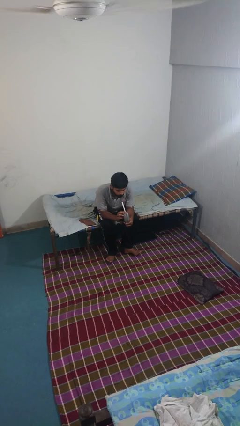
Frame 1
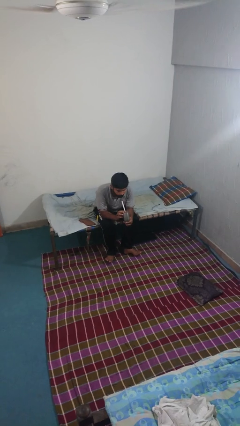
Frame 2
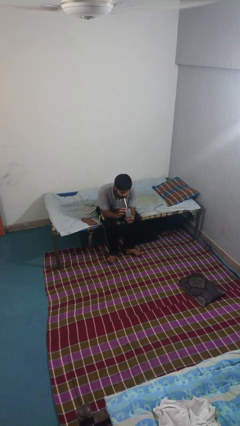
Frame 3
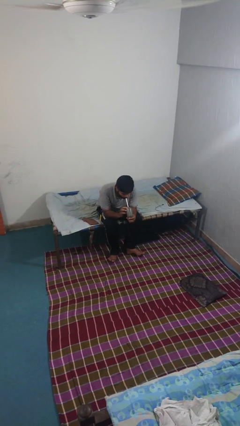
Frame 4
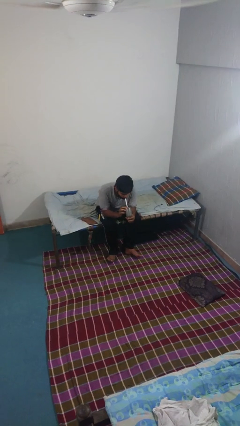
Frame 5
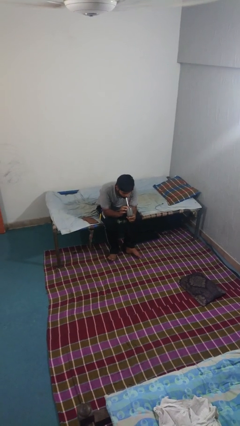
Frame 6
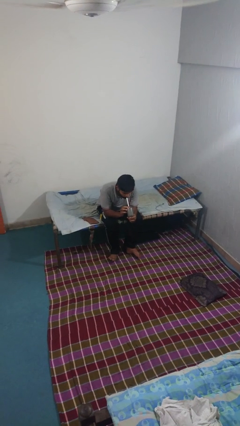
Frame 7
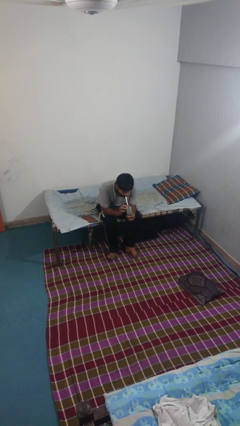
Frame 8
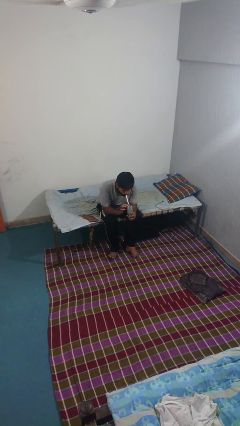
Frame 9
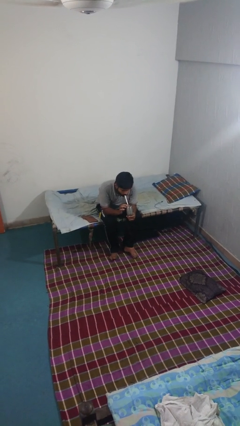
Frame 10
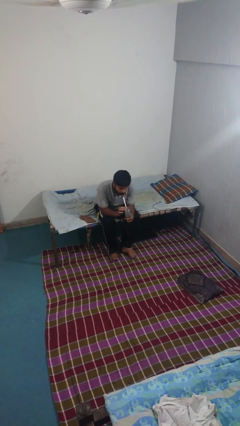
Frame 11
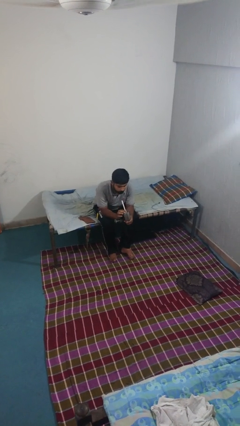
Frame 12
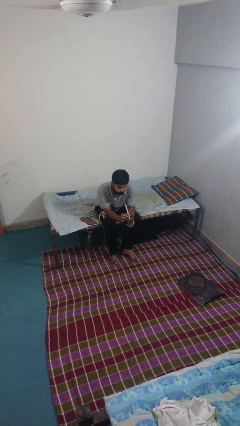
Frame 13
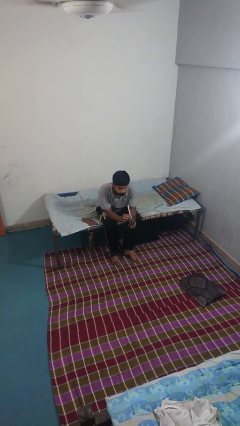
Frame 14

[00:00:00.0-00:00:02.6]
person drinks from straw

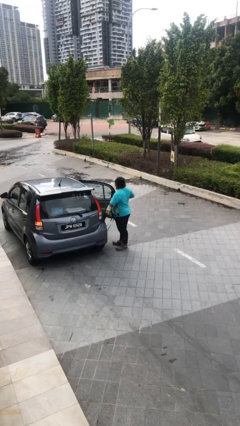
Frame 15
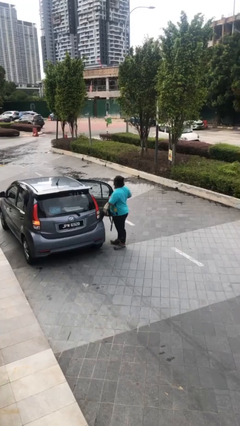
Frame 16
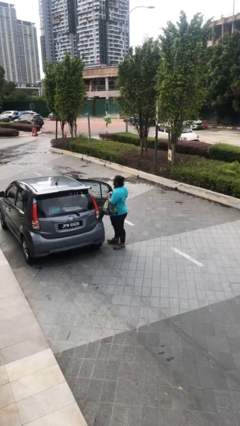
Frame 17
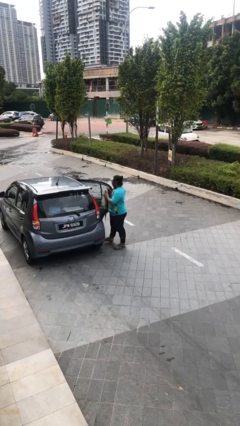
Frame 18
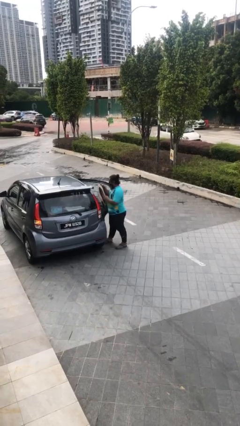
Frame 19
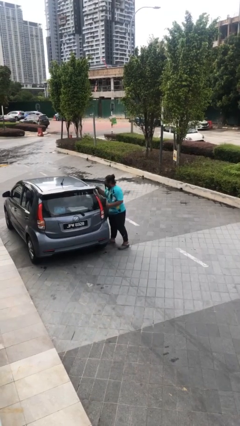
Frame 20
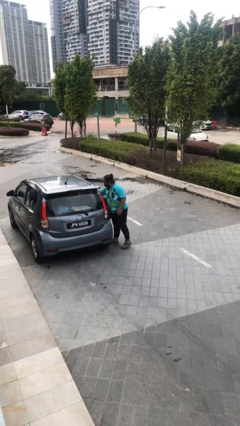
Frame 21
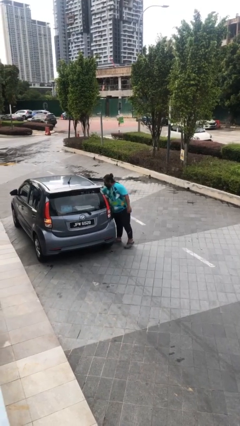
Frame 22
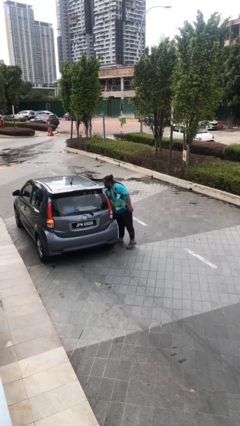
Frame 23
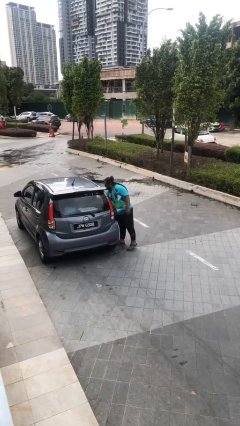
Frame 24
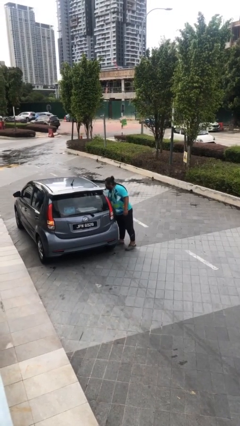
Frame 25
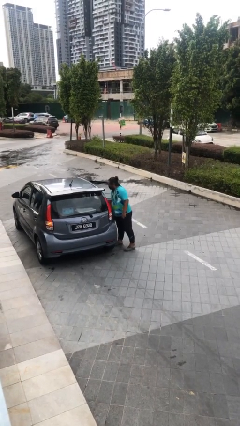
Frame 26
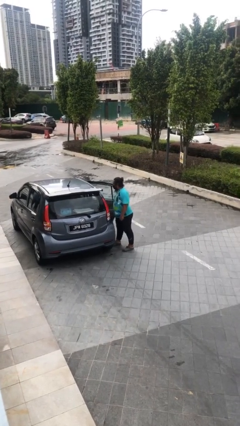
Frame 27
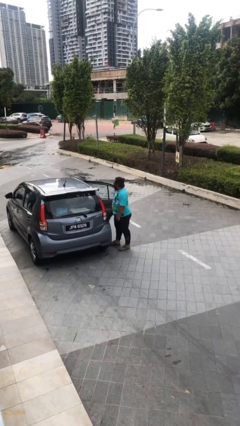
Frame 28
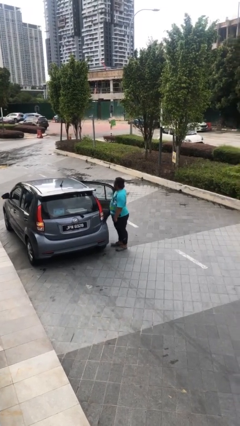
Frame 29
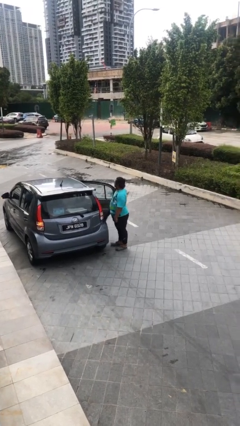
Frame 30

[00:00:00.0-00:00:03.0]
person loads car

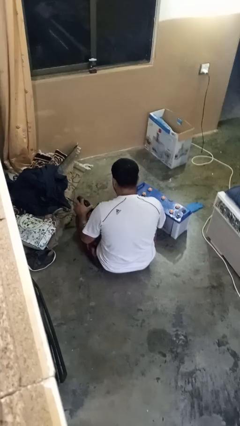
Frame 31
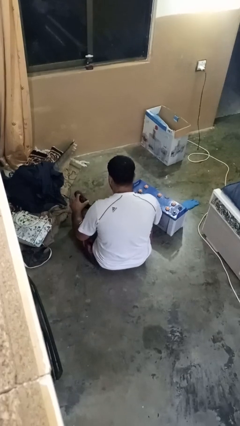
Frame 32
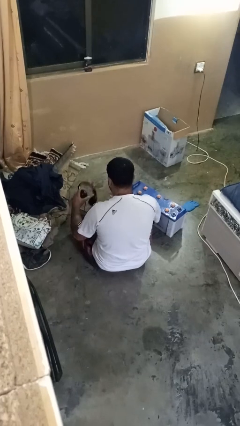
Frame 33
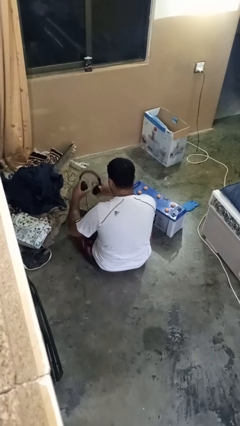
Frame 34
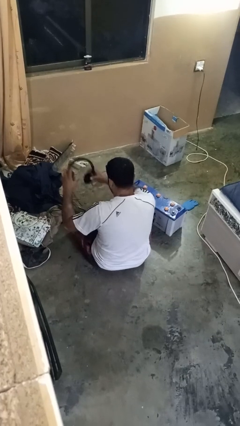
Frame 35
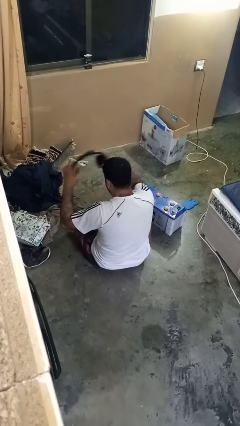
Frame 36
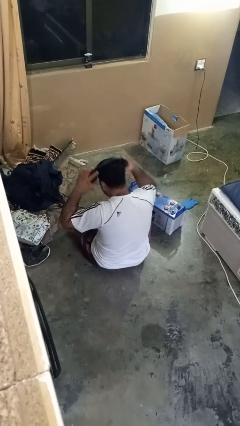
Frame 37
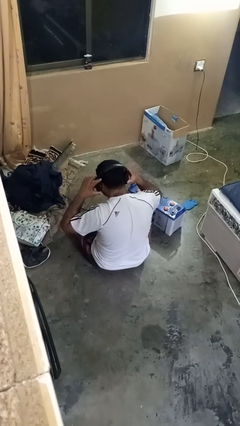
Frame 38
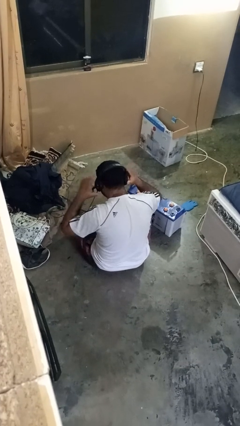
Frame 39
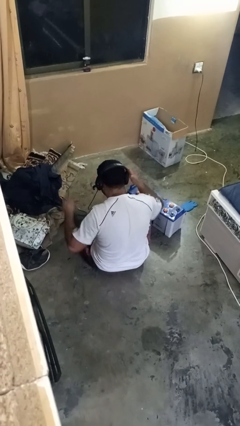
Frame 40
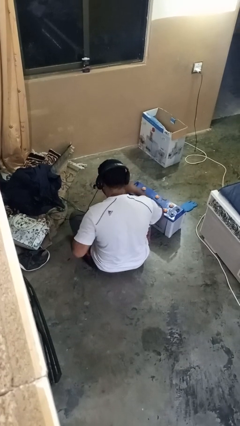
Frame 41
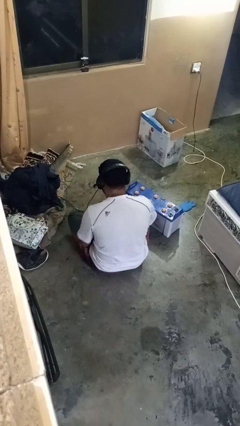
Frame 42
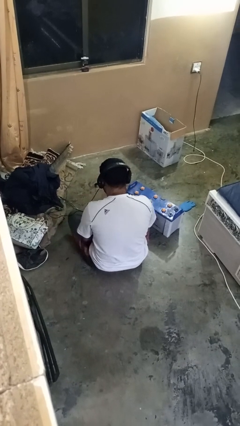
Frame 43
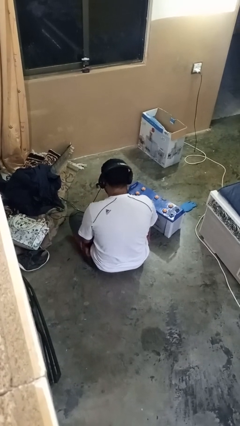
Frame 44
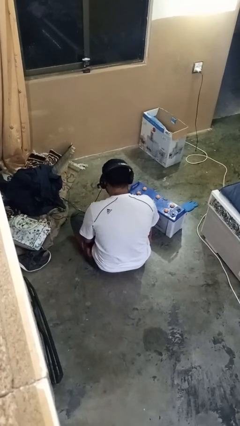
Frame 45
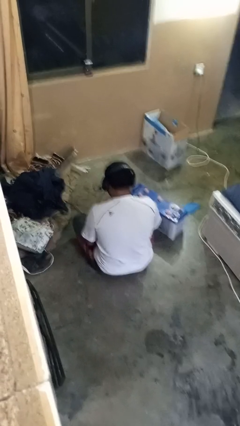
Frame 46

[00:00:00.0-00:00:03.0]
person puts on headphones

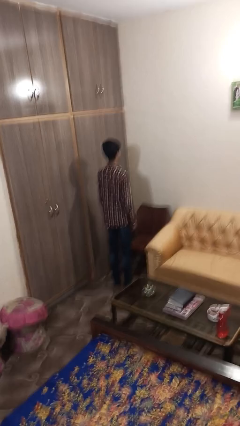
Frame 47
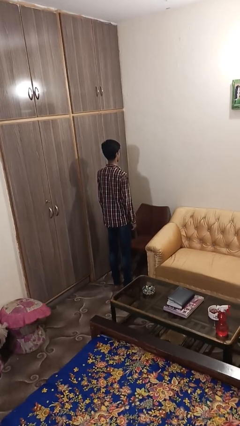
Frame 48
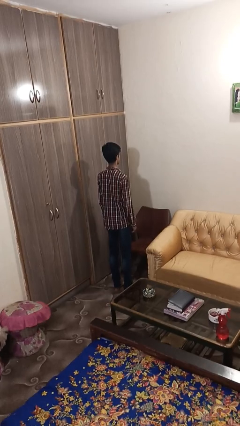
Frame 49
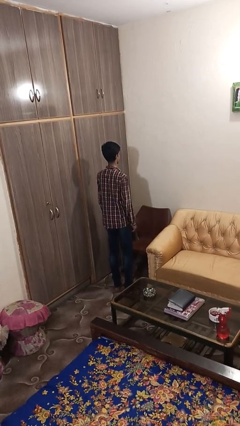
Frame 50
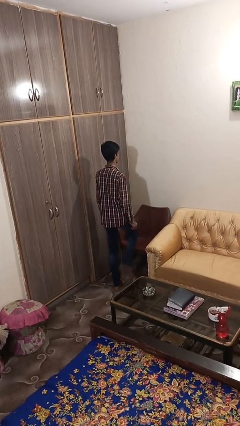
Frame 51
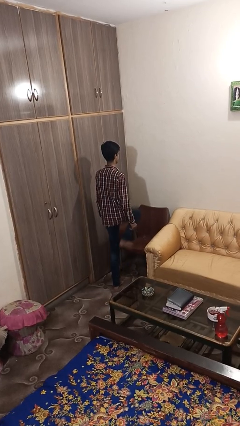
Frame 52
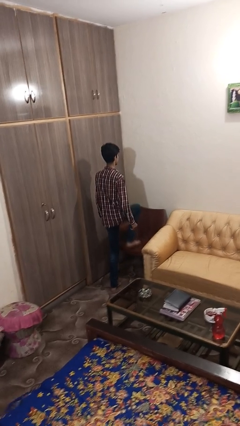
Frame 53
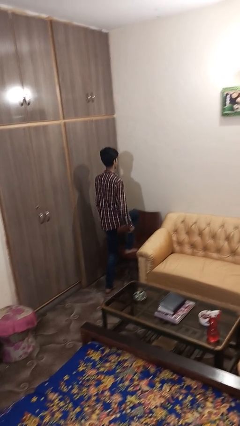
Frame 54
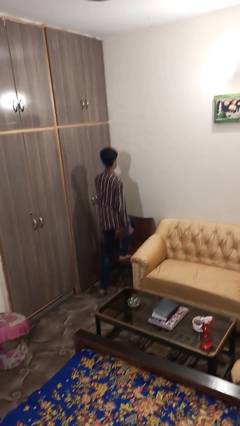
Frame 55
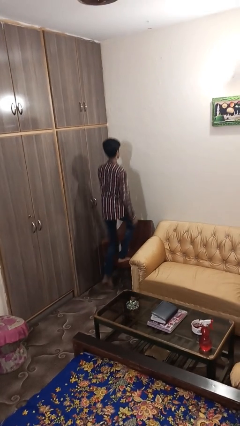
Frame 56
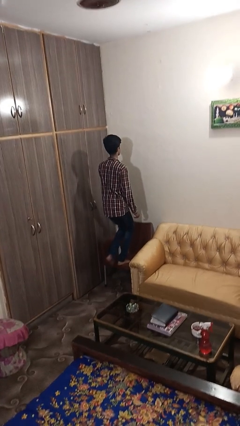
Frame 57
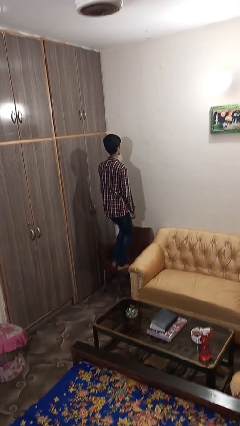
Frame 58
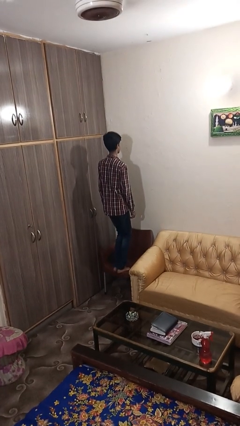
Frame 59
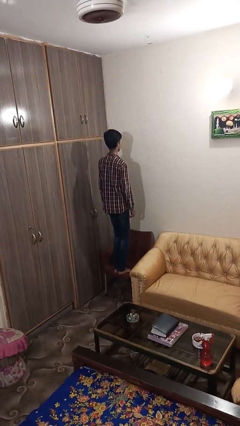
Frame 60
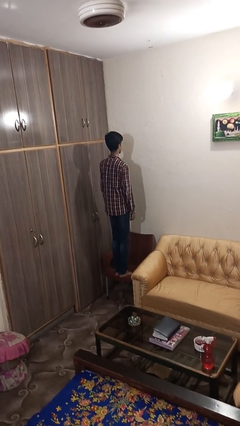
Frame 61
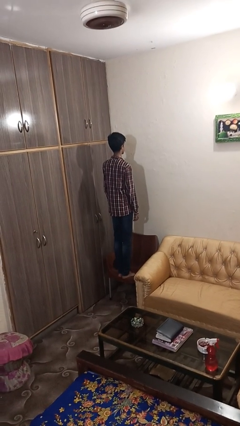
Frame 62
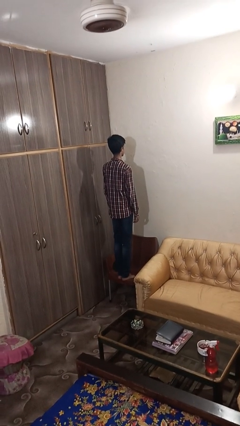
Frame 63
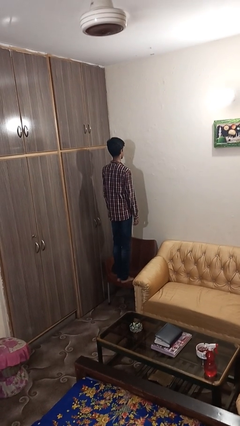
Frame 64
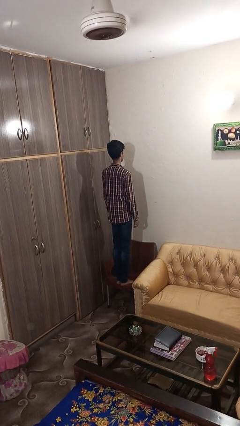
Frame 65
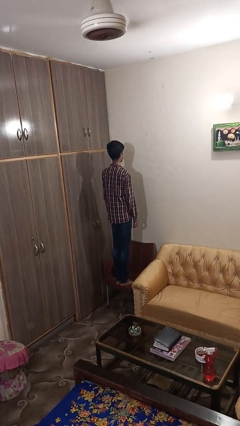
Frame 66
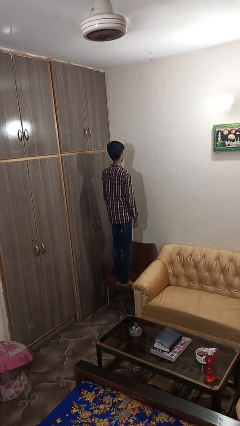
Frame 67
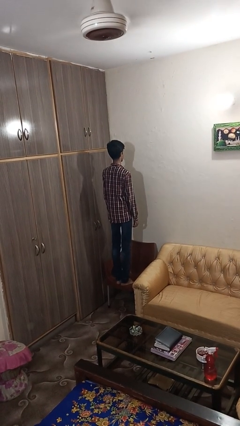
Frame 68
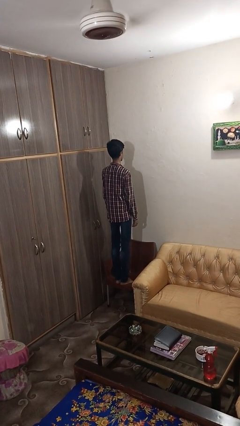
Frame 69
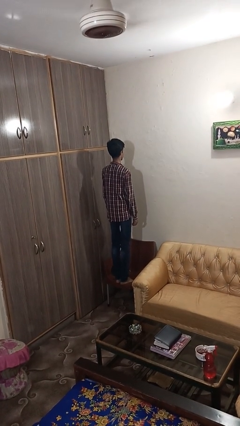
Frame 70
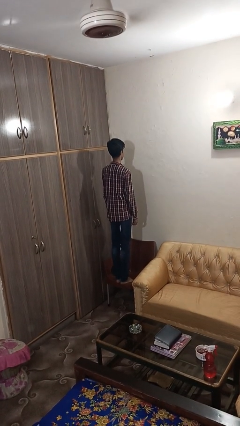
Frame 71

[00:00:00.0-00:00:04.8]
person climbs on chair

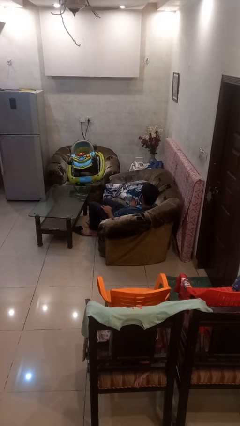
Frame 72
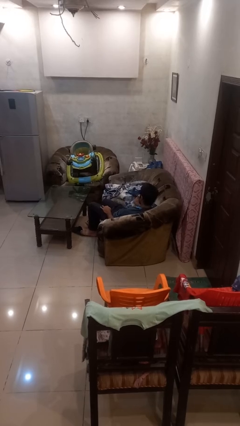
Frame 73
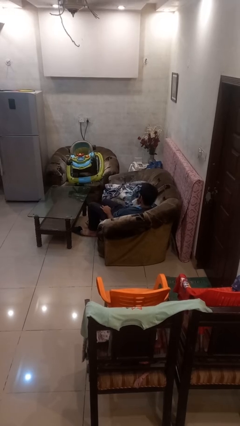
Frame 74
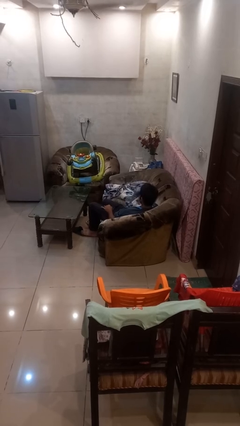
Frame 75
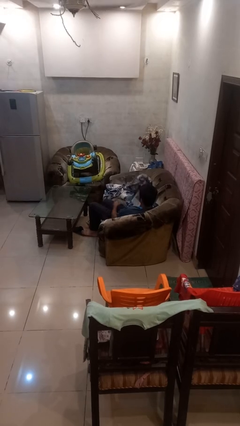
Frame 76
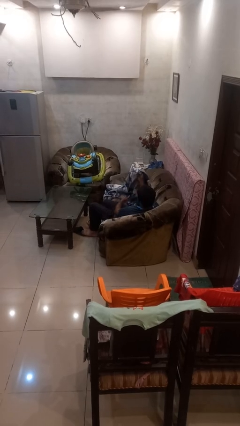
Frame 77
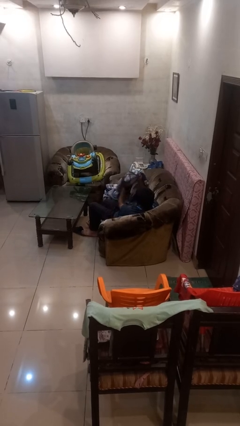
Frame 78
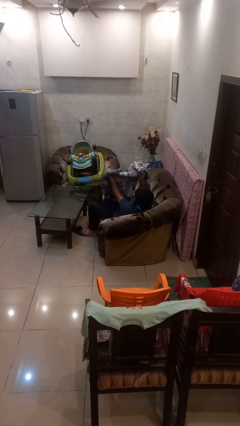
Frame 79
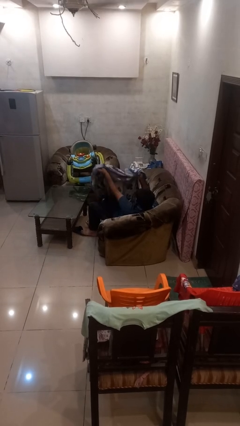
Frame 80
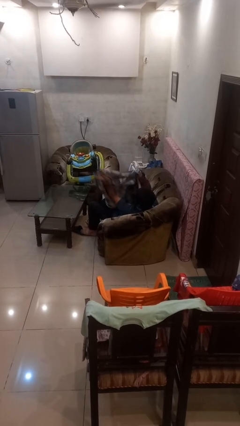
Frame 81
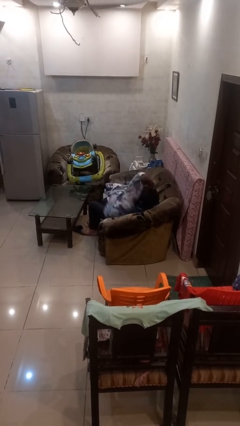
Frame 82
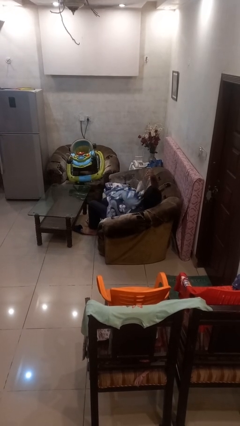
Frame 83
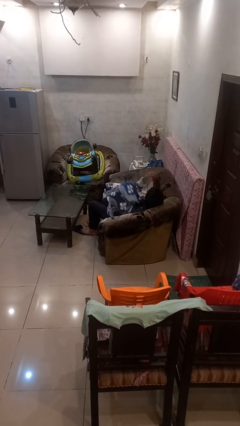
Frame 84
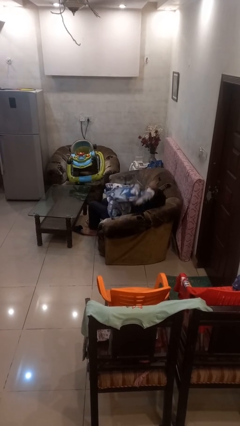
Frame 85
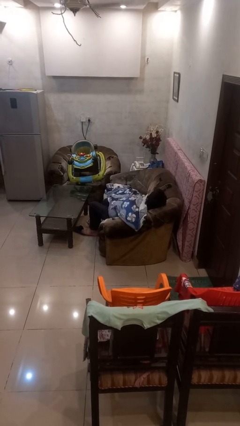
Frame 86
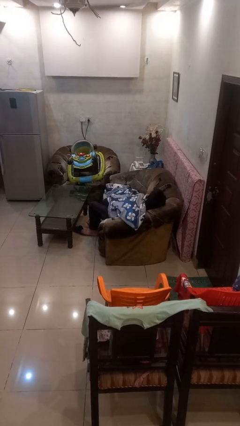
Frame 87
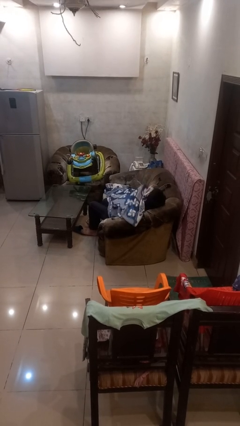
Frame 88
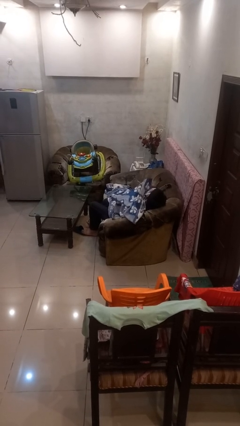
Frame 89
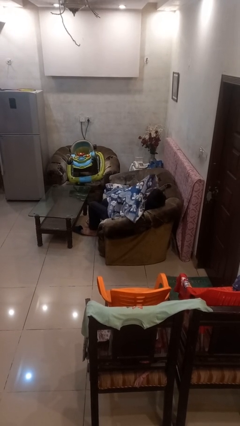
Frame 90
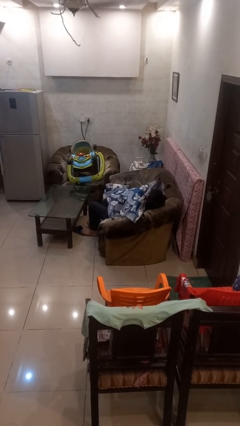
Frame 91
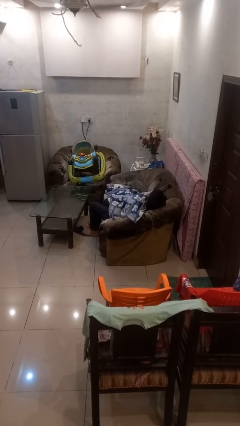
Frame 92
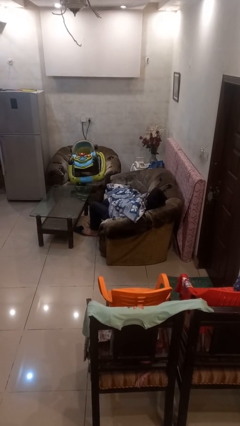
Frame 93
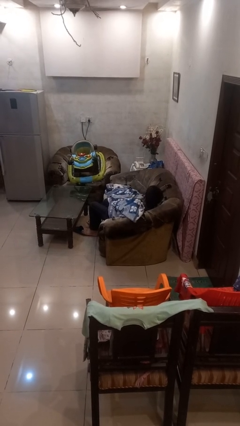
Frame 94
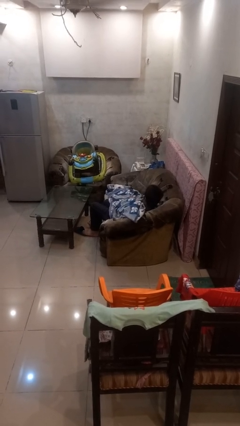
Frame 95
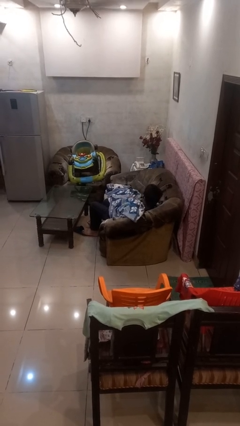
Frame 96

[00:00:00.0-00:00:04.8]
person covers with blanket
